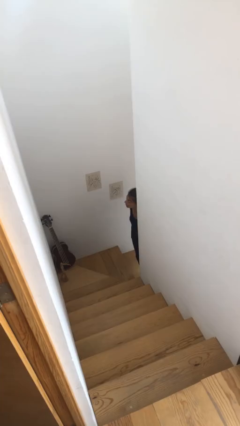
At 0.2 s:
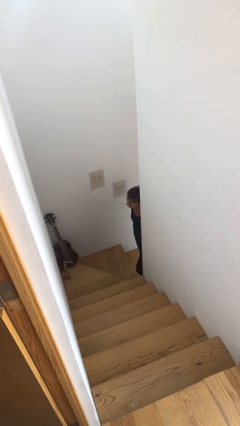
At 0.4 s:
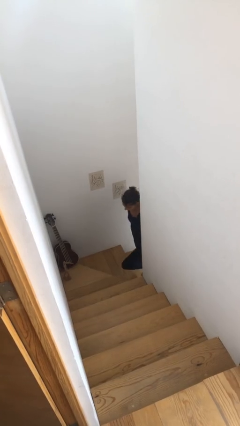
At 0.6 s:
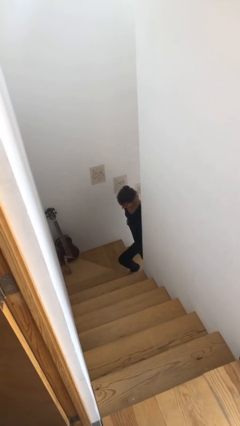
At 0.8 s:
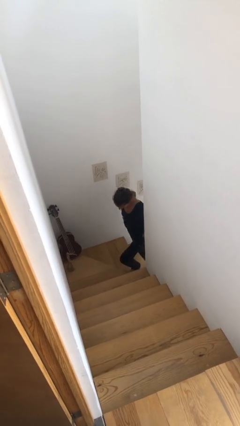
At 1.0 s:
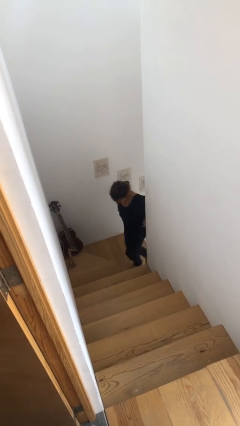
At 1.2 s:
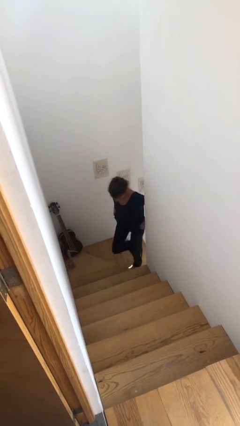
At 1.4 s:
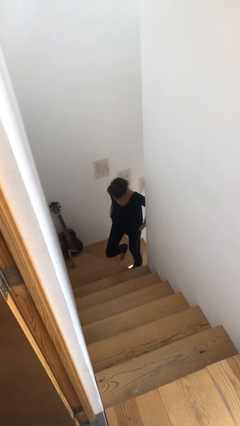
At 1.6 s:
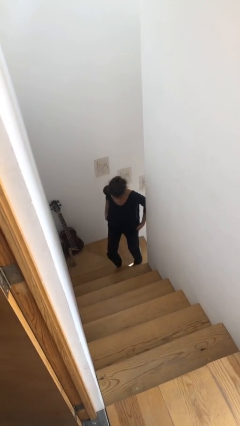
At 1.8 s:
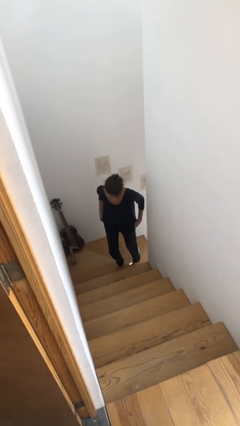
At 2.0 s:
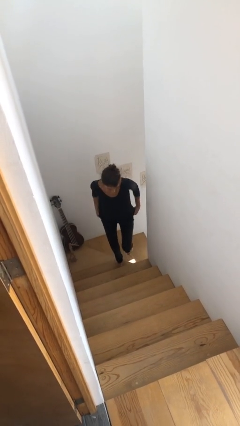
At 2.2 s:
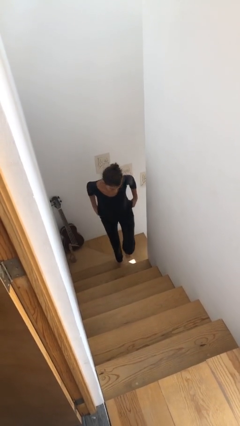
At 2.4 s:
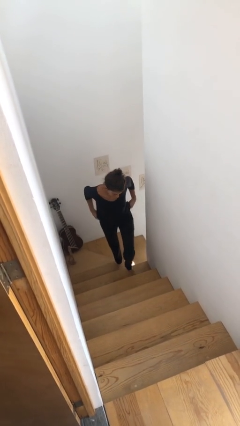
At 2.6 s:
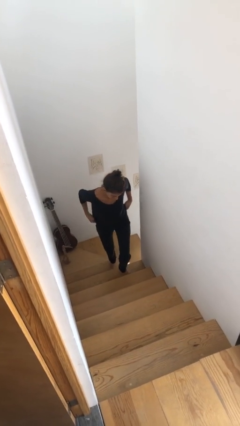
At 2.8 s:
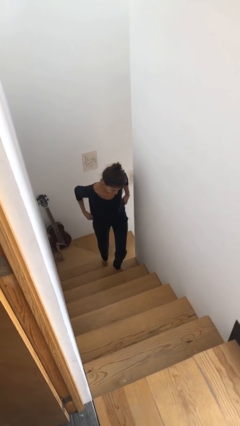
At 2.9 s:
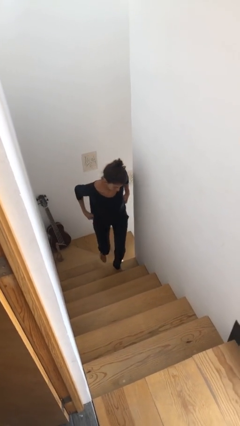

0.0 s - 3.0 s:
person climbs up stairs

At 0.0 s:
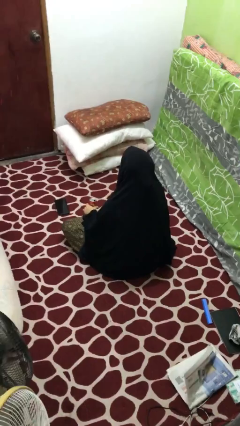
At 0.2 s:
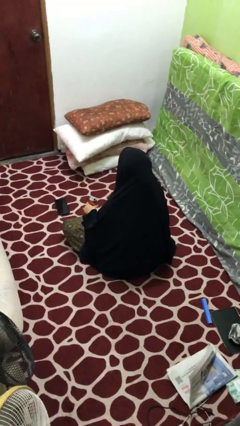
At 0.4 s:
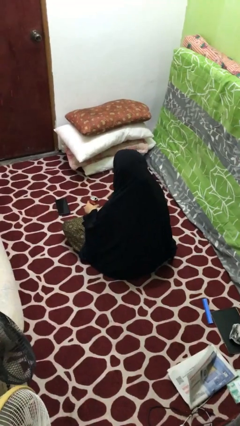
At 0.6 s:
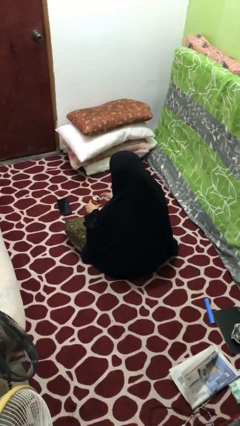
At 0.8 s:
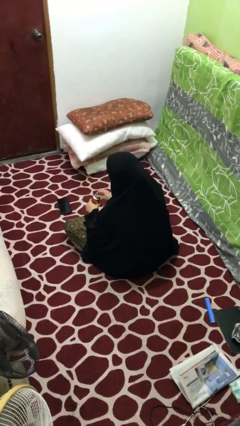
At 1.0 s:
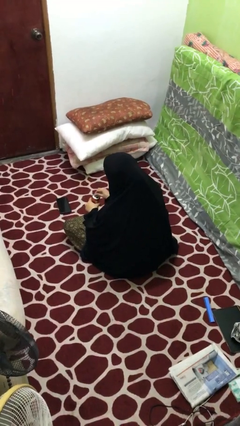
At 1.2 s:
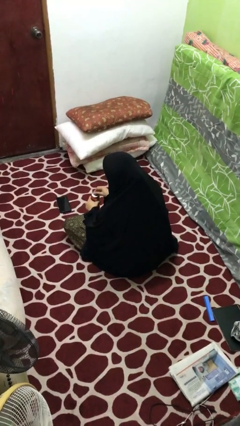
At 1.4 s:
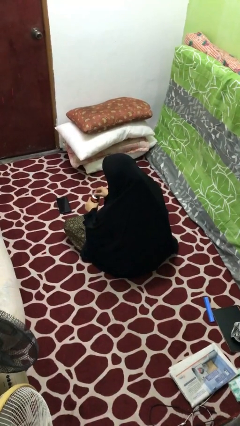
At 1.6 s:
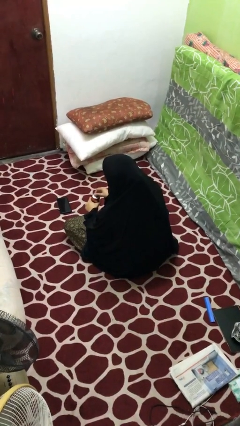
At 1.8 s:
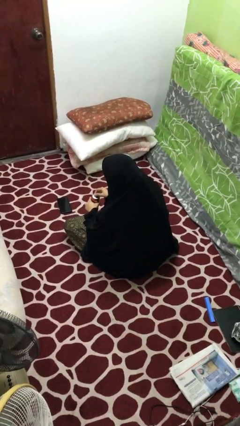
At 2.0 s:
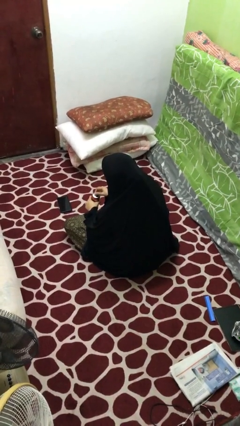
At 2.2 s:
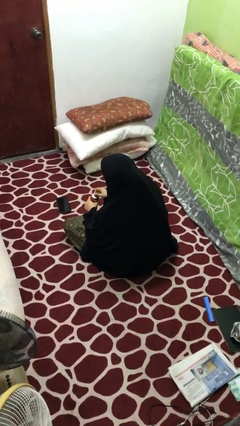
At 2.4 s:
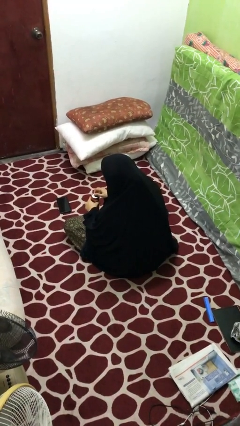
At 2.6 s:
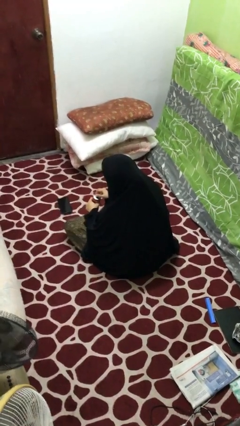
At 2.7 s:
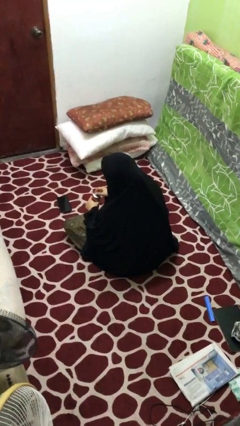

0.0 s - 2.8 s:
person opens beverage can

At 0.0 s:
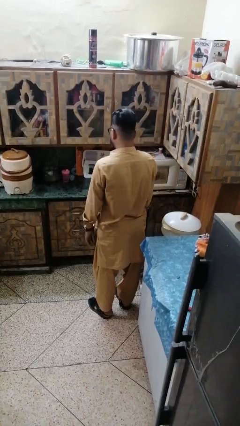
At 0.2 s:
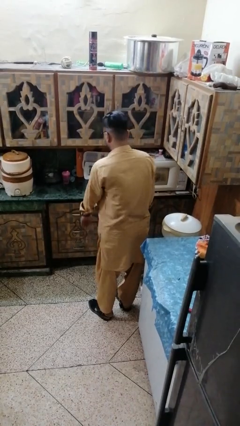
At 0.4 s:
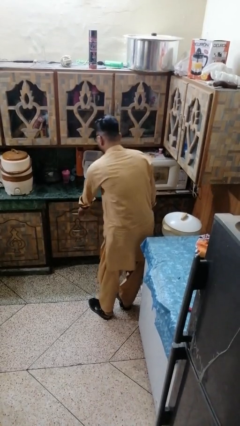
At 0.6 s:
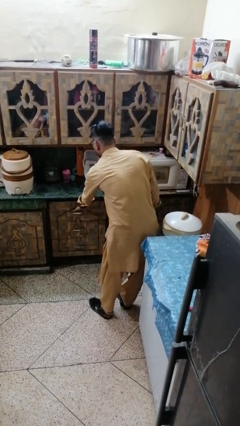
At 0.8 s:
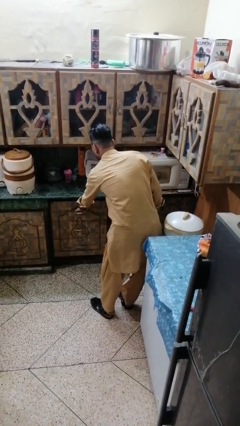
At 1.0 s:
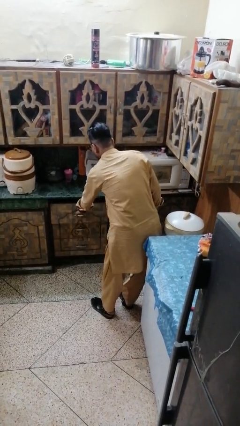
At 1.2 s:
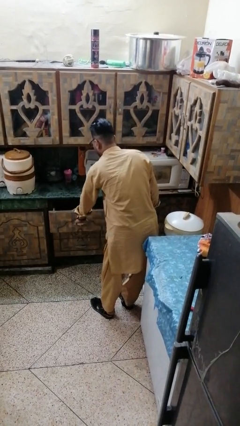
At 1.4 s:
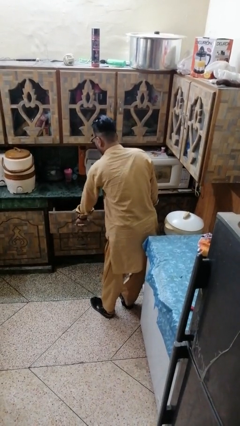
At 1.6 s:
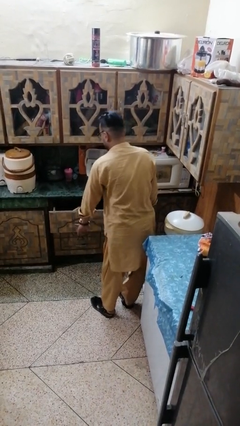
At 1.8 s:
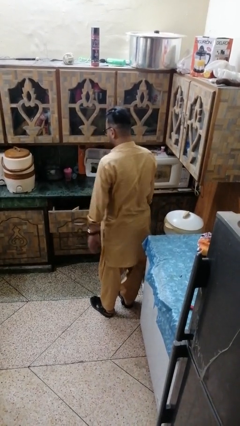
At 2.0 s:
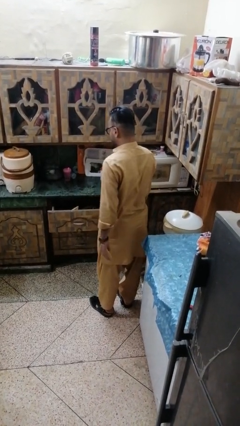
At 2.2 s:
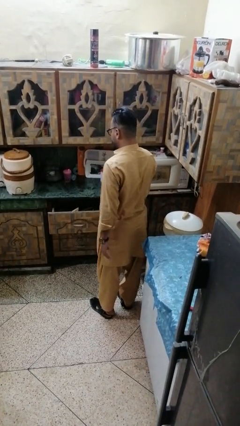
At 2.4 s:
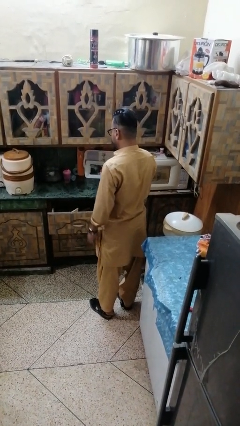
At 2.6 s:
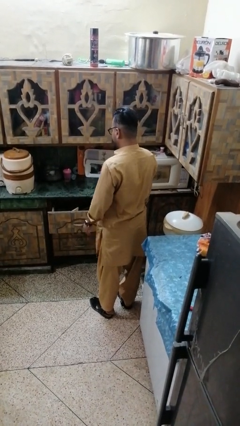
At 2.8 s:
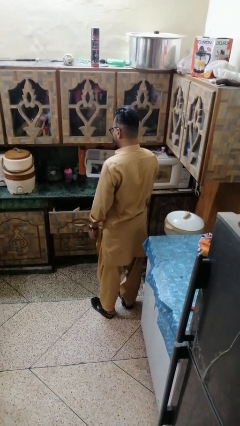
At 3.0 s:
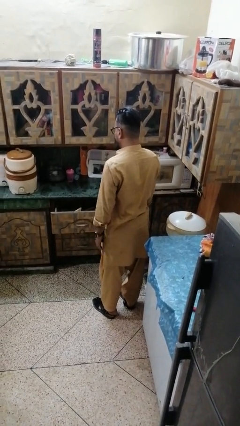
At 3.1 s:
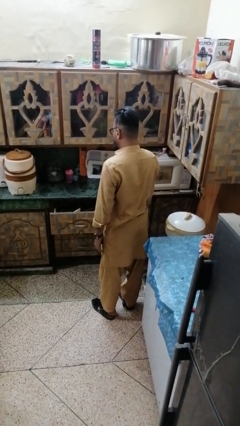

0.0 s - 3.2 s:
person opens kitchen drawer

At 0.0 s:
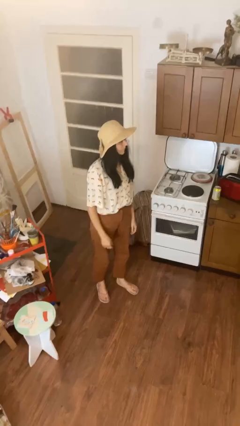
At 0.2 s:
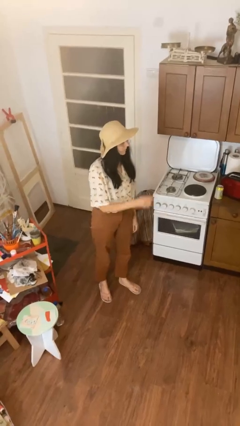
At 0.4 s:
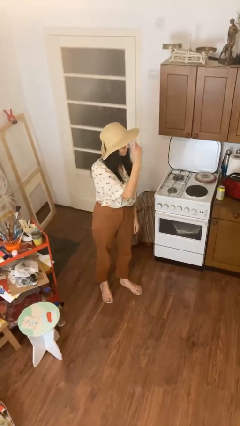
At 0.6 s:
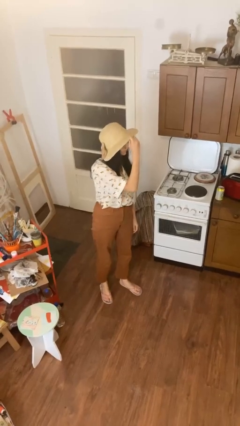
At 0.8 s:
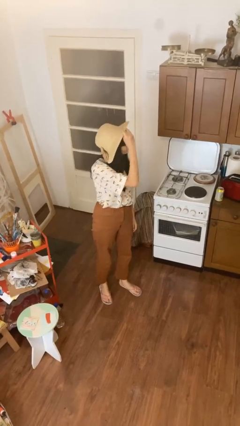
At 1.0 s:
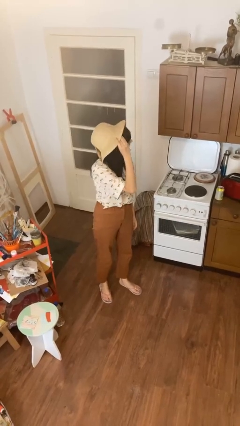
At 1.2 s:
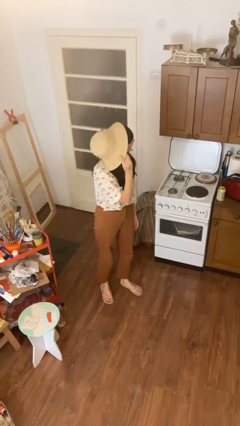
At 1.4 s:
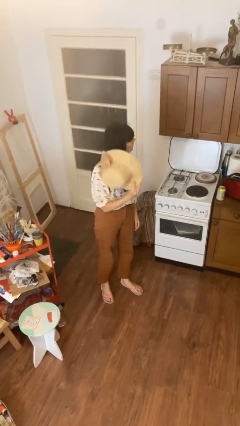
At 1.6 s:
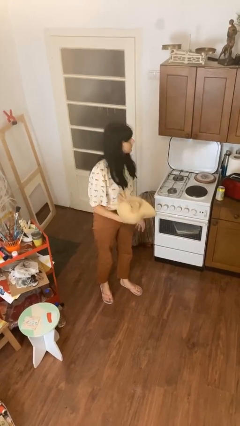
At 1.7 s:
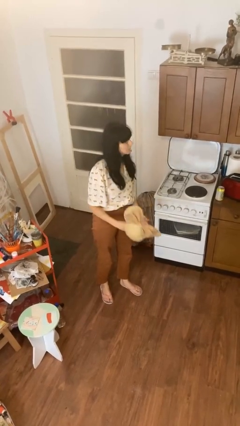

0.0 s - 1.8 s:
person takes off hat

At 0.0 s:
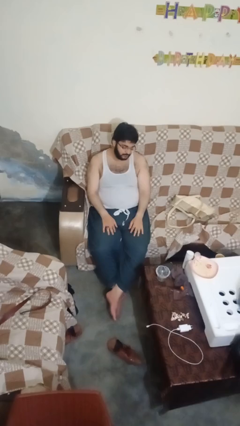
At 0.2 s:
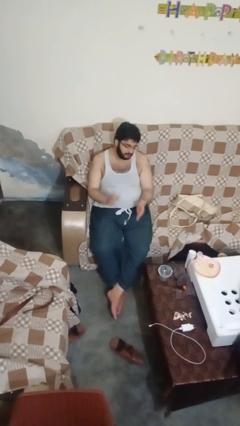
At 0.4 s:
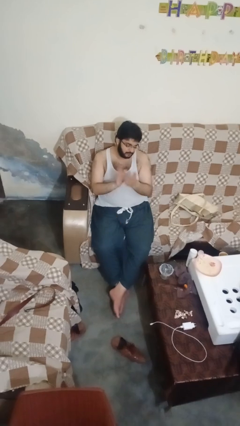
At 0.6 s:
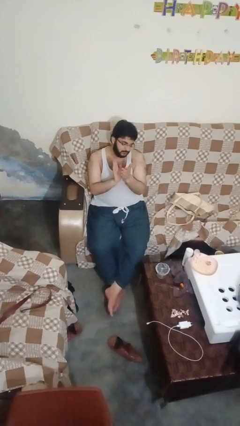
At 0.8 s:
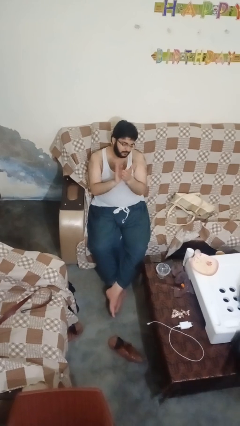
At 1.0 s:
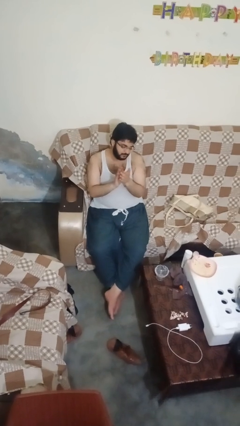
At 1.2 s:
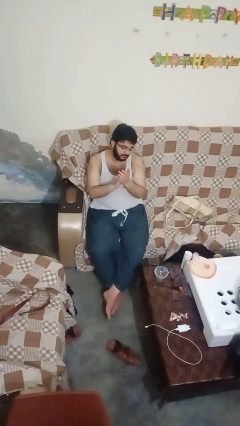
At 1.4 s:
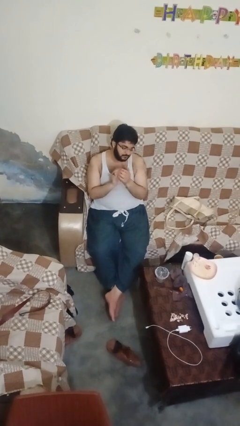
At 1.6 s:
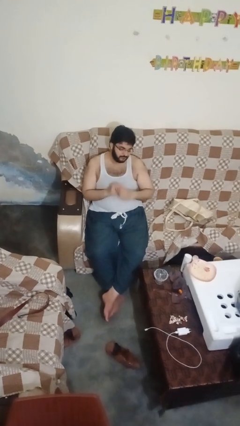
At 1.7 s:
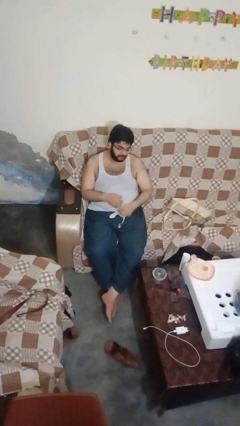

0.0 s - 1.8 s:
person claps hands

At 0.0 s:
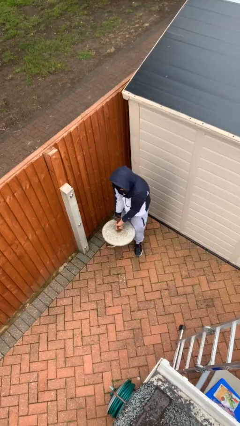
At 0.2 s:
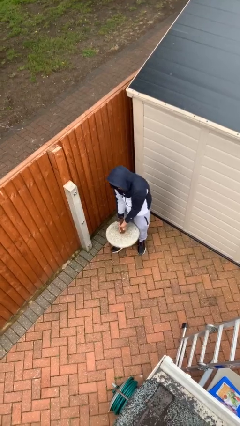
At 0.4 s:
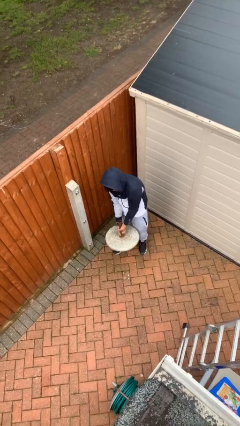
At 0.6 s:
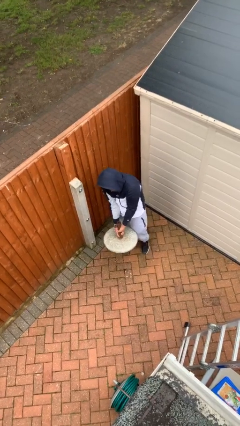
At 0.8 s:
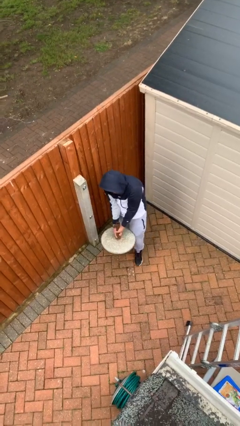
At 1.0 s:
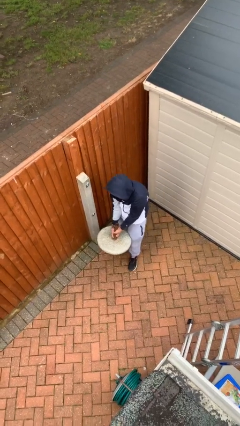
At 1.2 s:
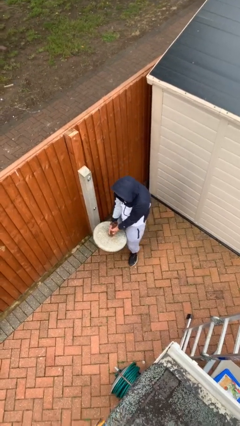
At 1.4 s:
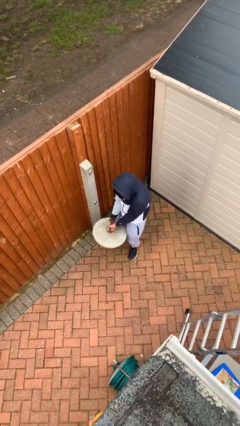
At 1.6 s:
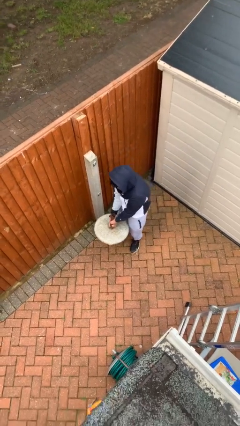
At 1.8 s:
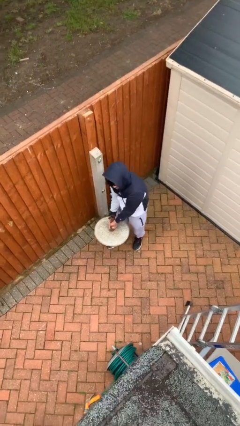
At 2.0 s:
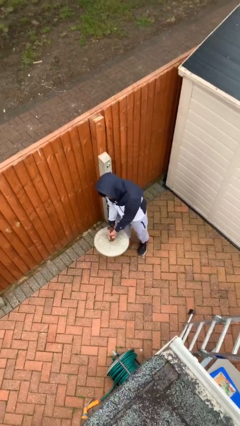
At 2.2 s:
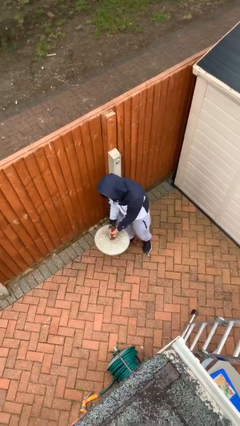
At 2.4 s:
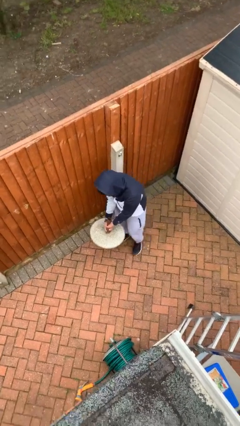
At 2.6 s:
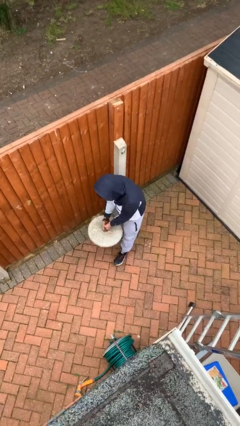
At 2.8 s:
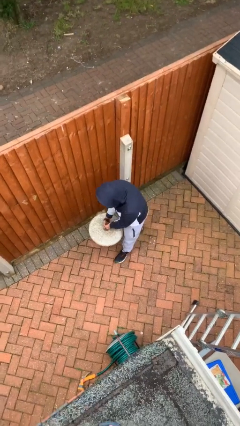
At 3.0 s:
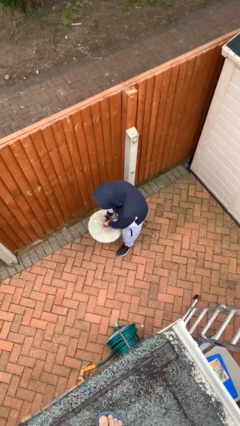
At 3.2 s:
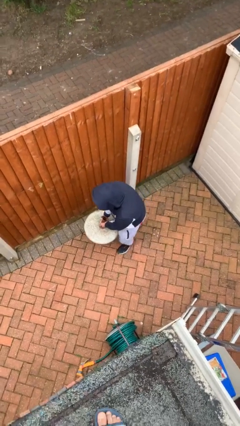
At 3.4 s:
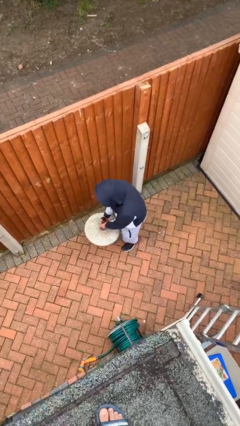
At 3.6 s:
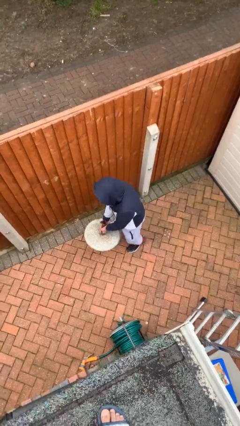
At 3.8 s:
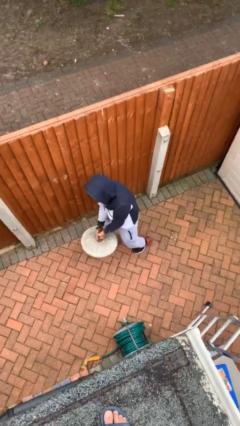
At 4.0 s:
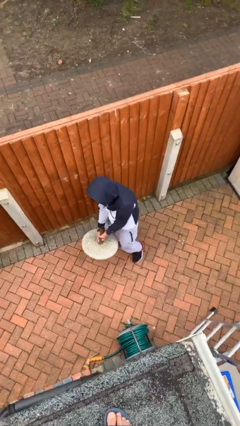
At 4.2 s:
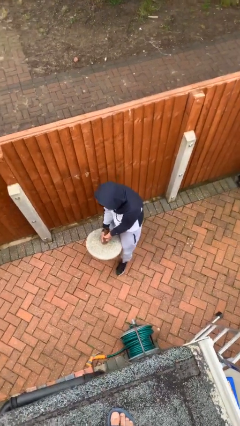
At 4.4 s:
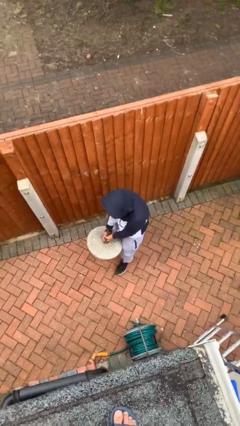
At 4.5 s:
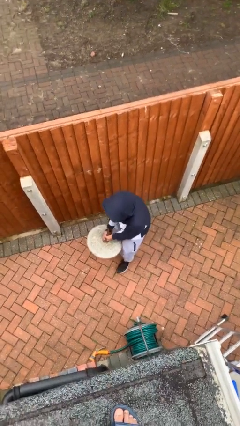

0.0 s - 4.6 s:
person carries heavy object

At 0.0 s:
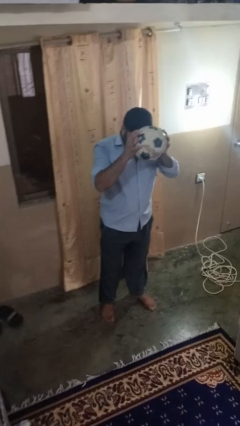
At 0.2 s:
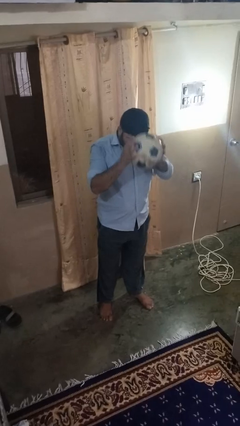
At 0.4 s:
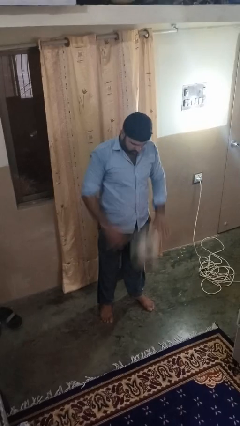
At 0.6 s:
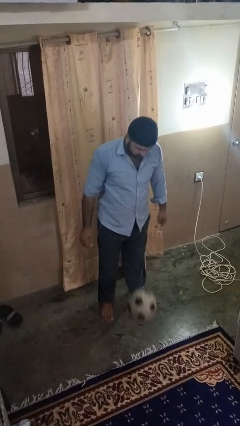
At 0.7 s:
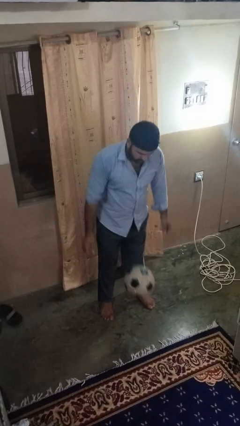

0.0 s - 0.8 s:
person bounces ball on floor
